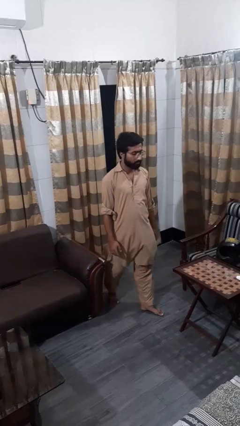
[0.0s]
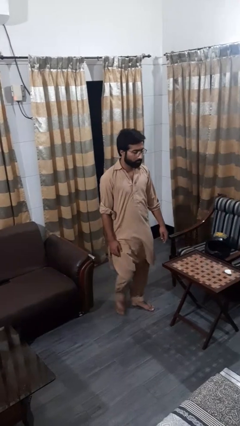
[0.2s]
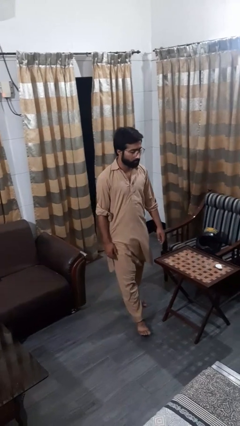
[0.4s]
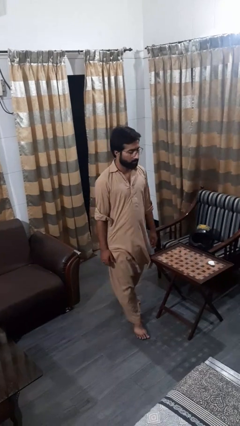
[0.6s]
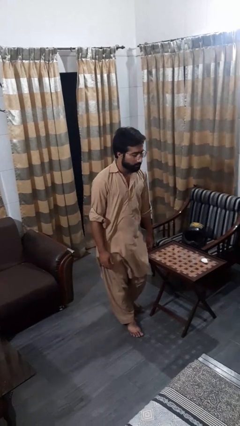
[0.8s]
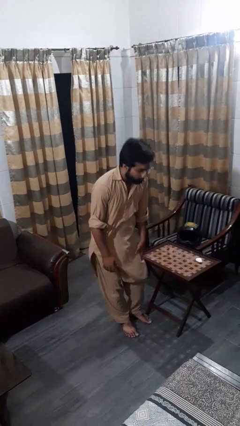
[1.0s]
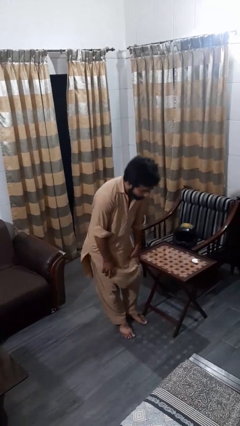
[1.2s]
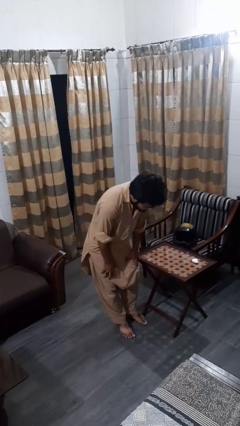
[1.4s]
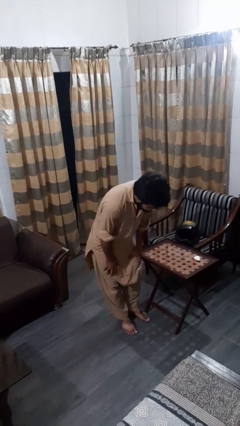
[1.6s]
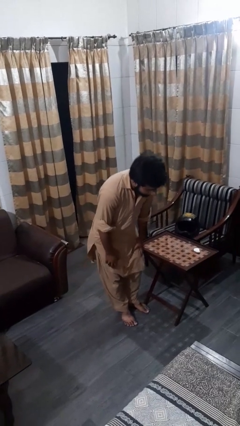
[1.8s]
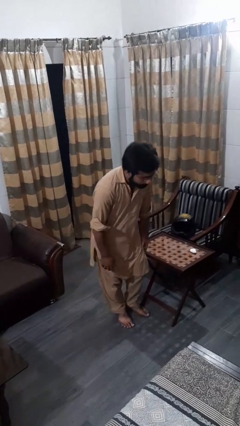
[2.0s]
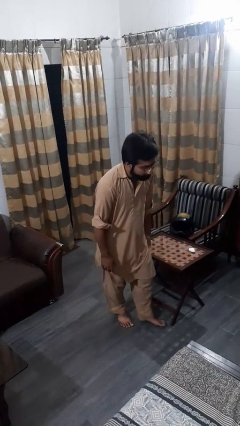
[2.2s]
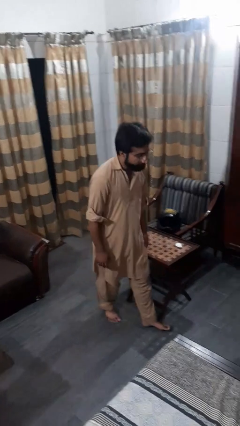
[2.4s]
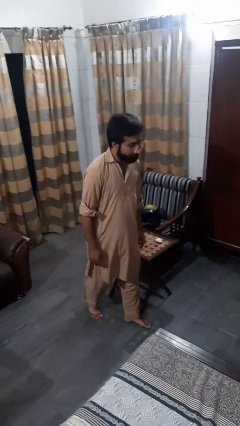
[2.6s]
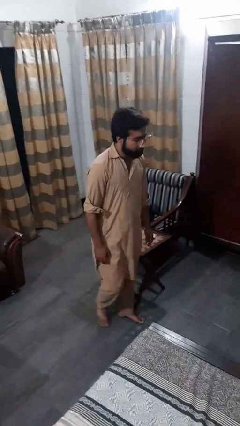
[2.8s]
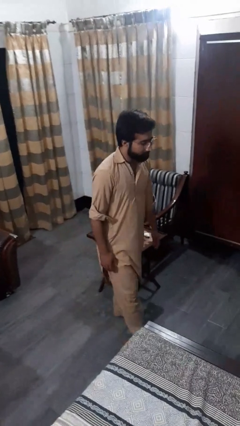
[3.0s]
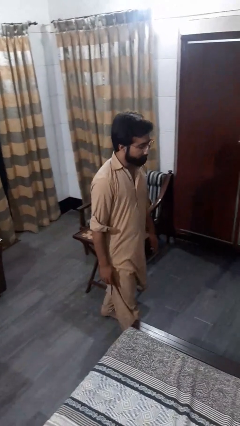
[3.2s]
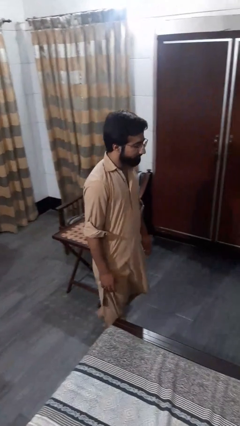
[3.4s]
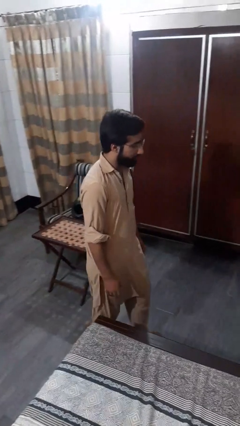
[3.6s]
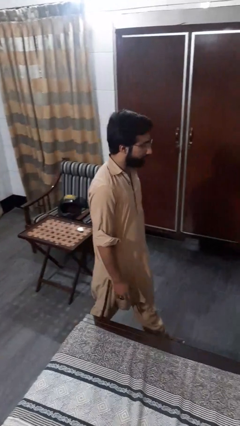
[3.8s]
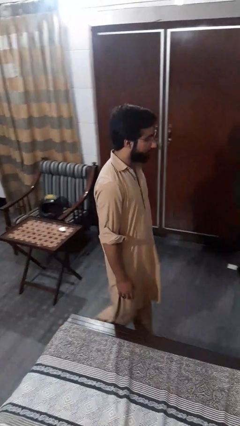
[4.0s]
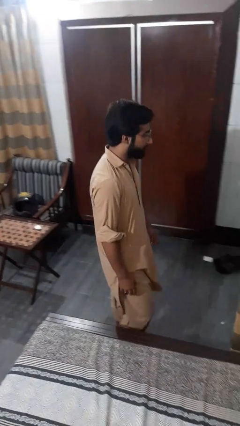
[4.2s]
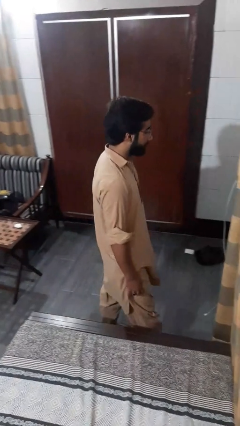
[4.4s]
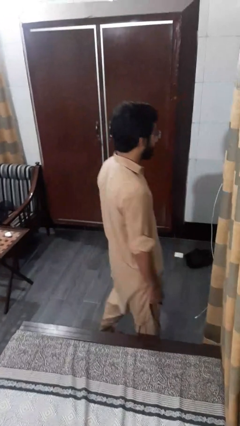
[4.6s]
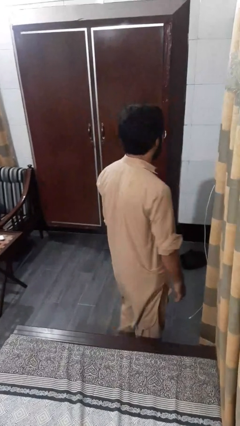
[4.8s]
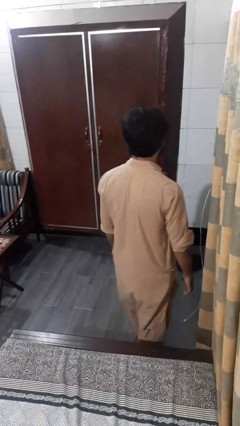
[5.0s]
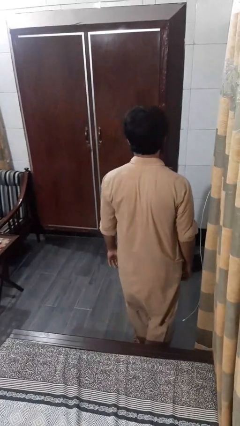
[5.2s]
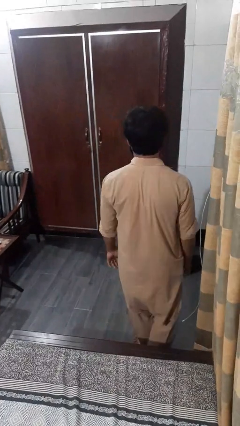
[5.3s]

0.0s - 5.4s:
person bumps into table

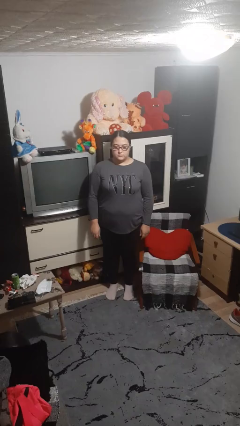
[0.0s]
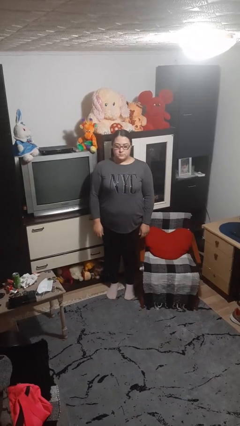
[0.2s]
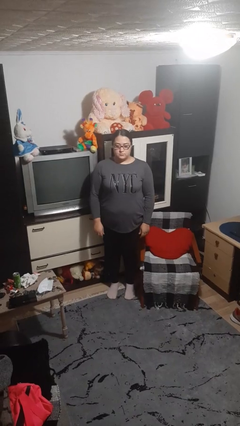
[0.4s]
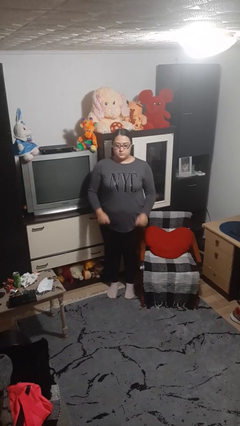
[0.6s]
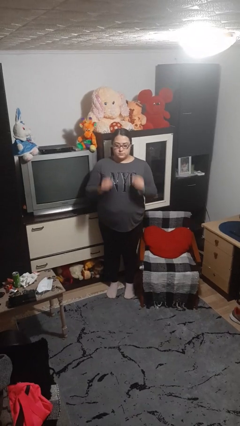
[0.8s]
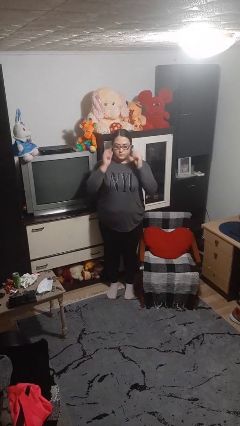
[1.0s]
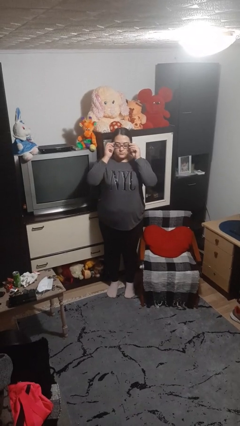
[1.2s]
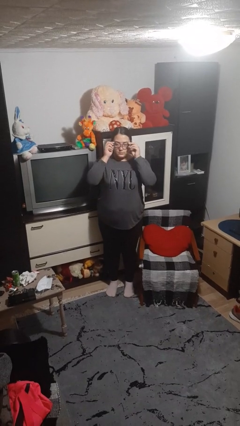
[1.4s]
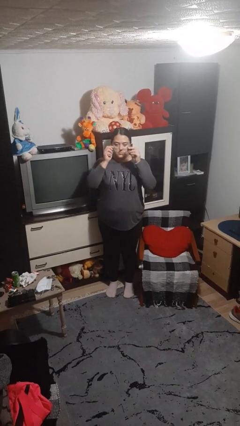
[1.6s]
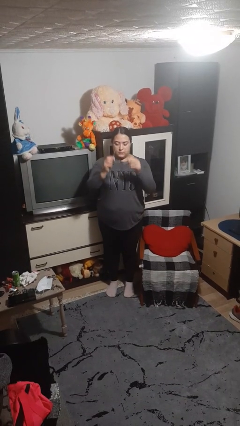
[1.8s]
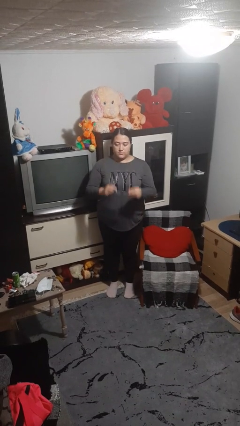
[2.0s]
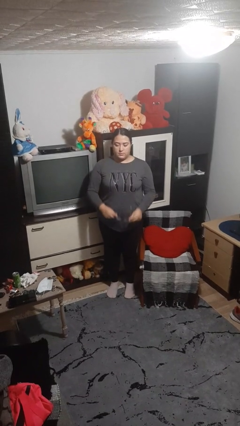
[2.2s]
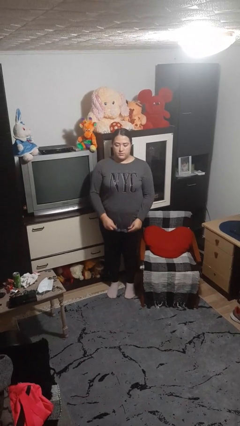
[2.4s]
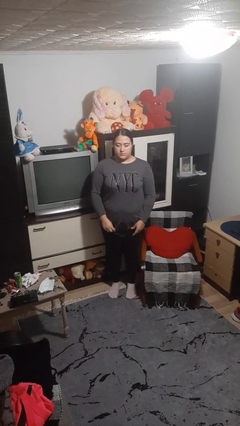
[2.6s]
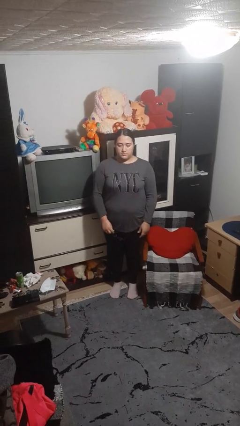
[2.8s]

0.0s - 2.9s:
person takes off glasses

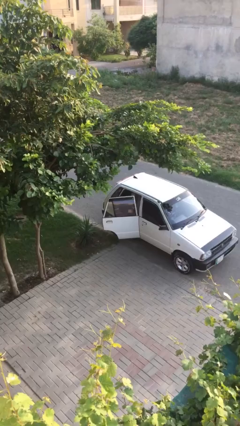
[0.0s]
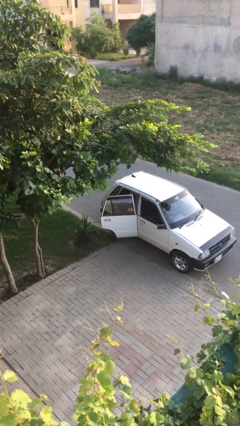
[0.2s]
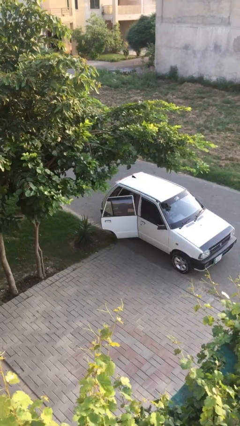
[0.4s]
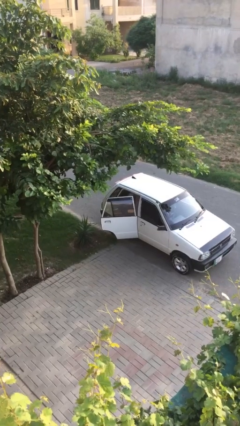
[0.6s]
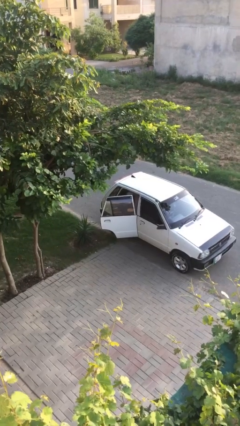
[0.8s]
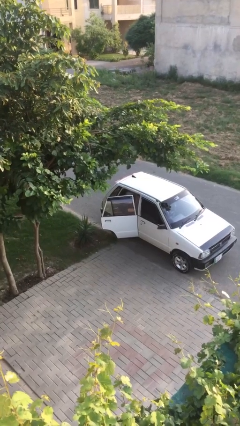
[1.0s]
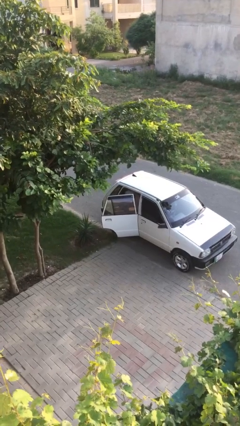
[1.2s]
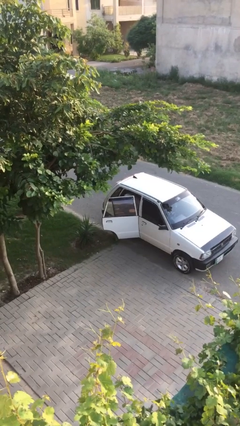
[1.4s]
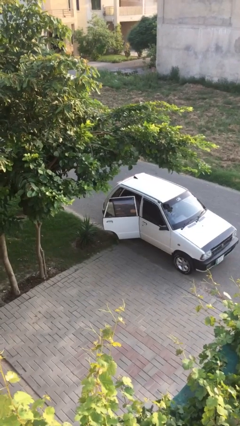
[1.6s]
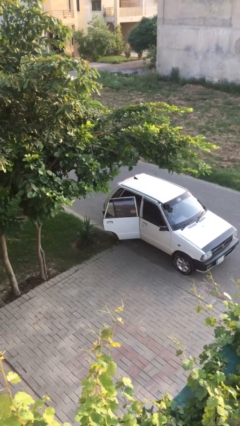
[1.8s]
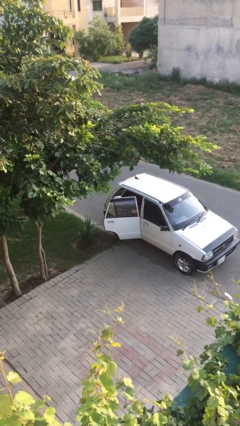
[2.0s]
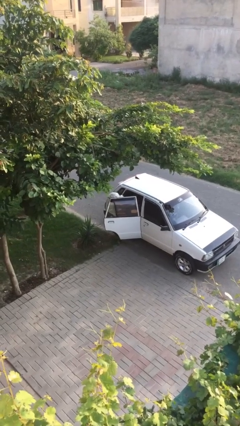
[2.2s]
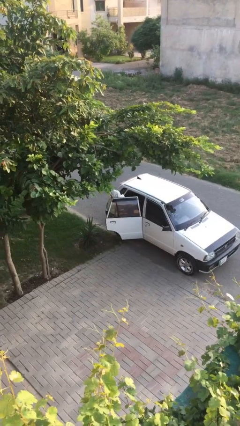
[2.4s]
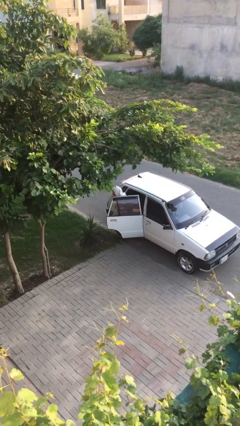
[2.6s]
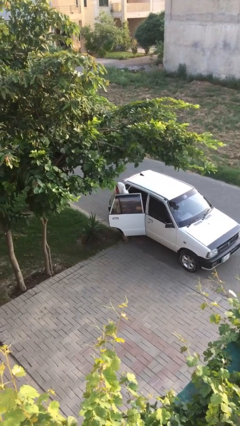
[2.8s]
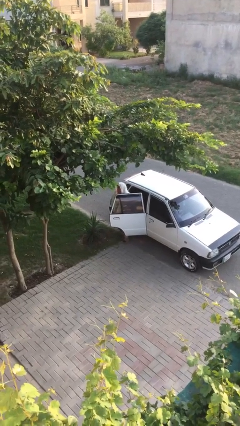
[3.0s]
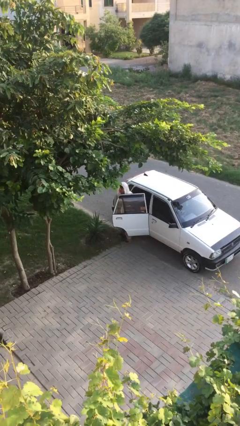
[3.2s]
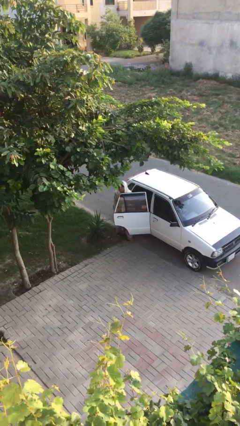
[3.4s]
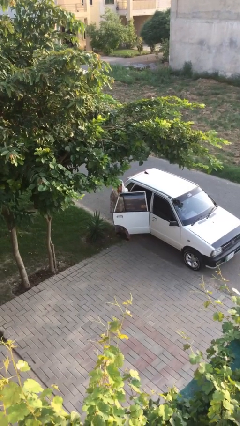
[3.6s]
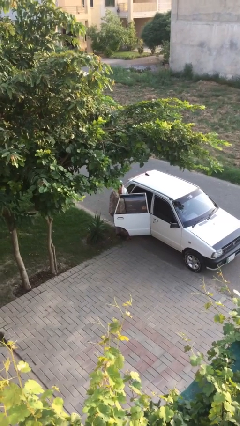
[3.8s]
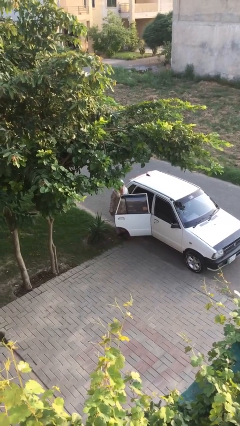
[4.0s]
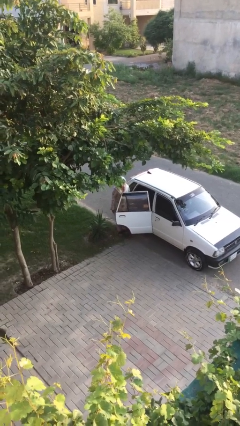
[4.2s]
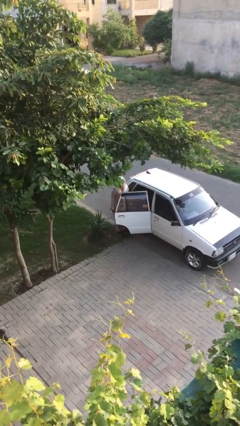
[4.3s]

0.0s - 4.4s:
person exits car

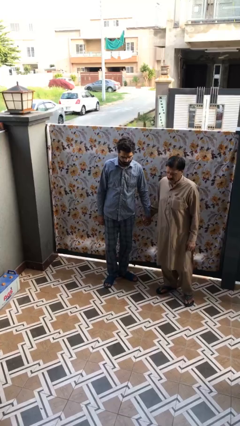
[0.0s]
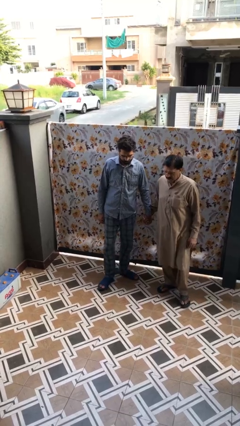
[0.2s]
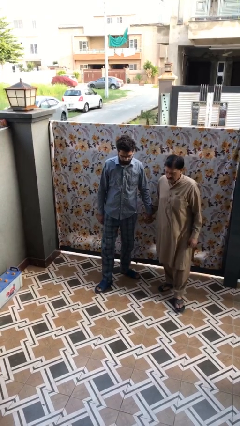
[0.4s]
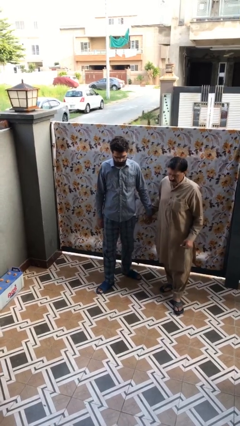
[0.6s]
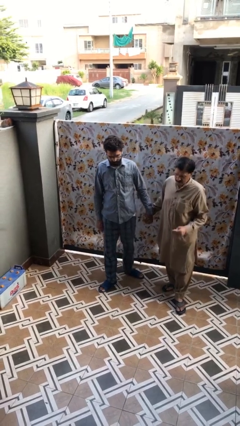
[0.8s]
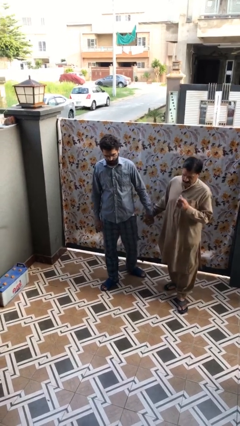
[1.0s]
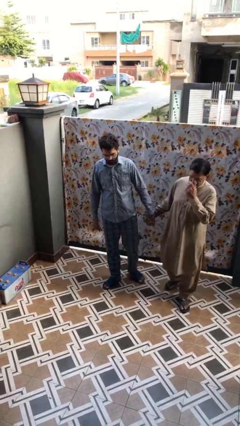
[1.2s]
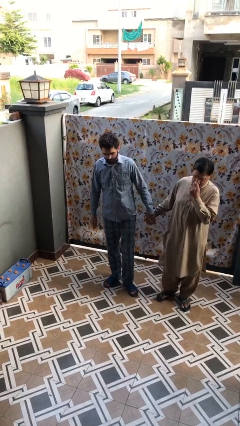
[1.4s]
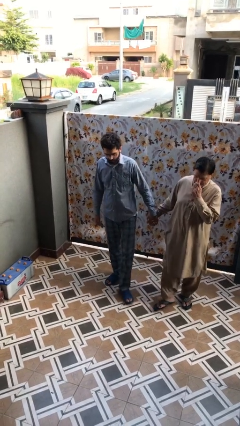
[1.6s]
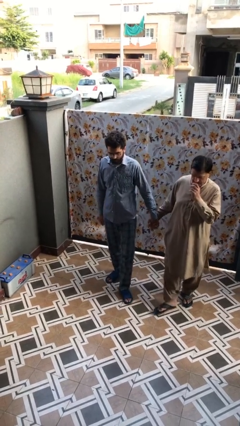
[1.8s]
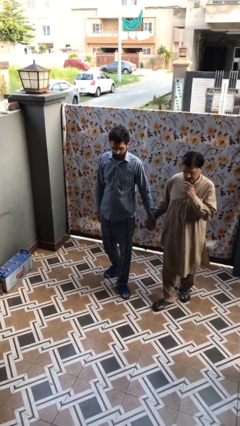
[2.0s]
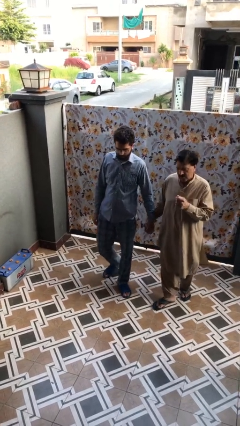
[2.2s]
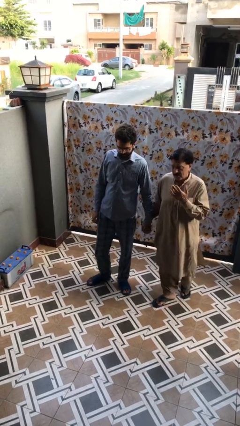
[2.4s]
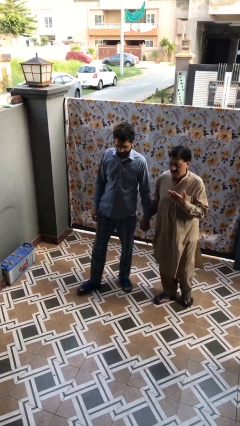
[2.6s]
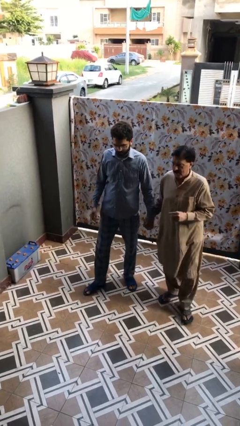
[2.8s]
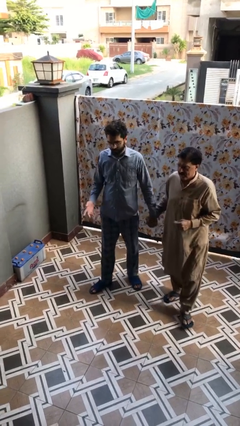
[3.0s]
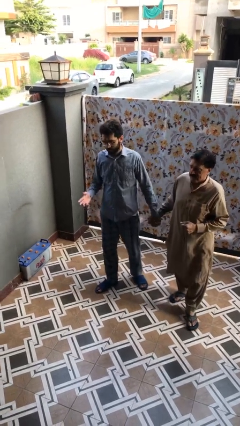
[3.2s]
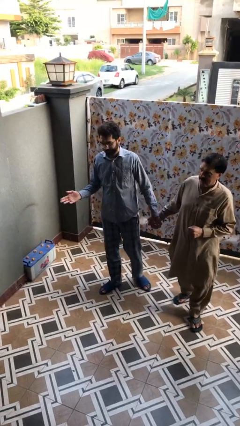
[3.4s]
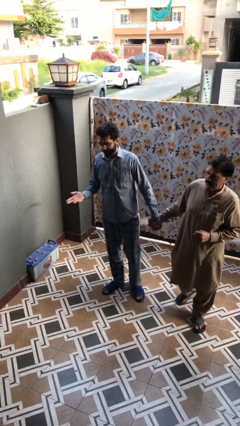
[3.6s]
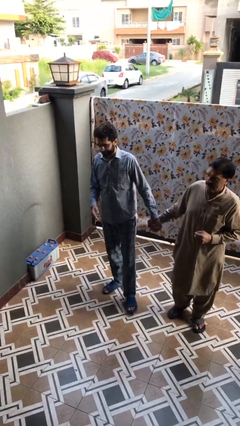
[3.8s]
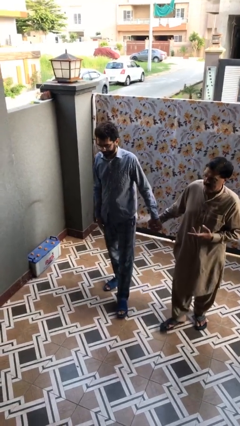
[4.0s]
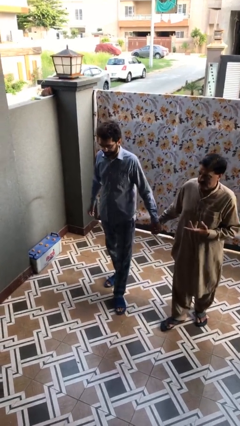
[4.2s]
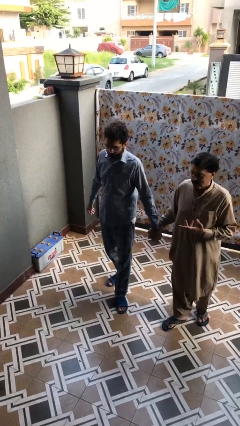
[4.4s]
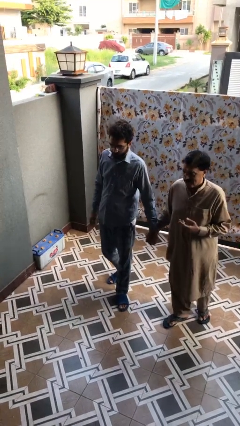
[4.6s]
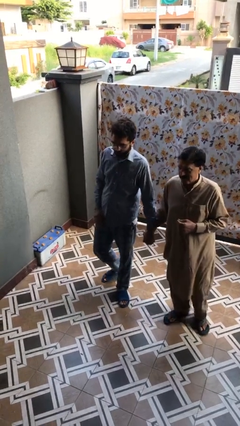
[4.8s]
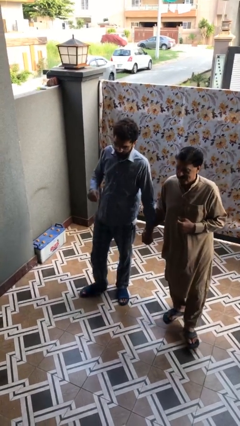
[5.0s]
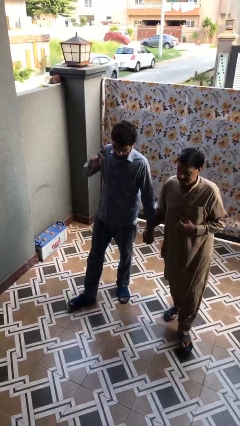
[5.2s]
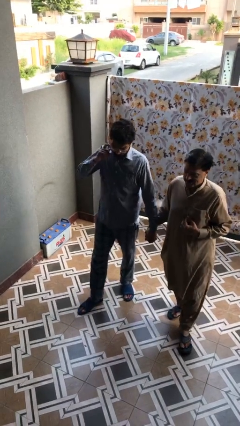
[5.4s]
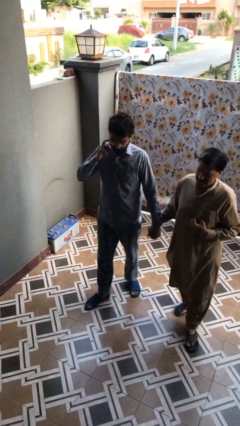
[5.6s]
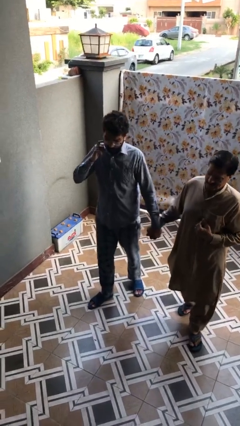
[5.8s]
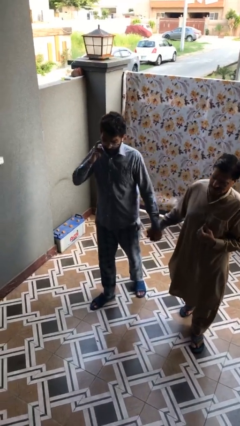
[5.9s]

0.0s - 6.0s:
person holds hand
